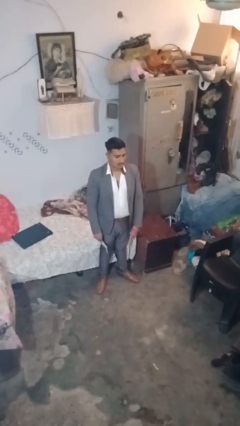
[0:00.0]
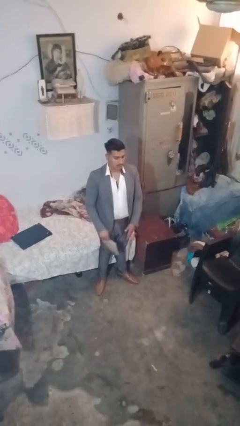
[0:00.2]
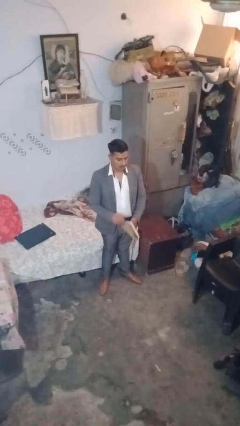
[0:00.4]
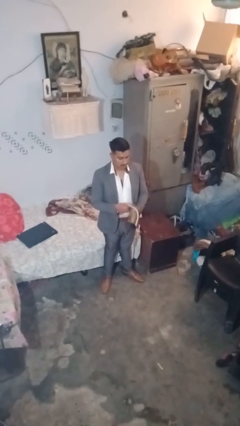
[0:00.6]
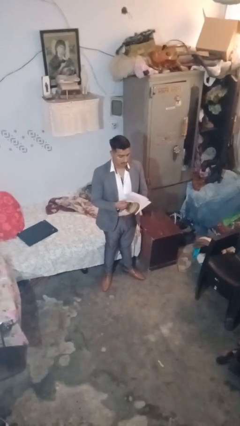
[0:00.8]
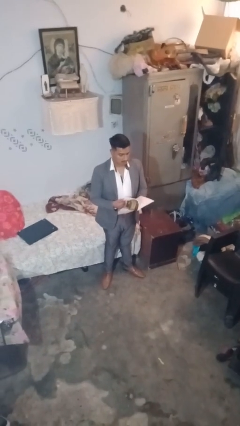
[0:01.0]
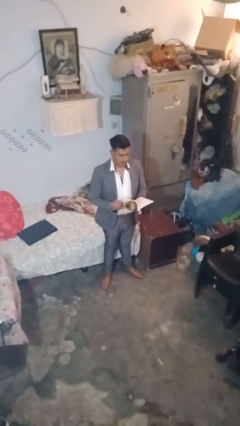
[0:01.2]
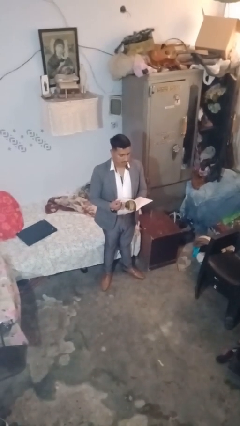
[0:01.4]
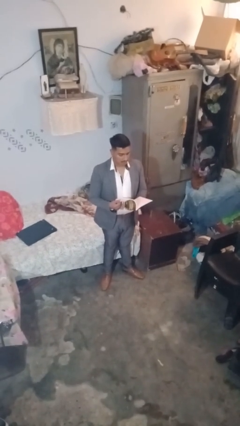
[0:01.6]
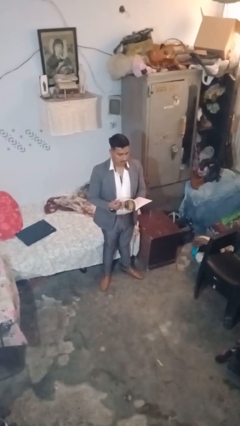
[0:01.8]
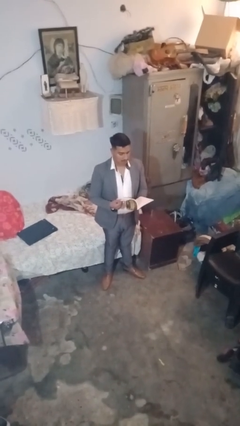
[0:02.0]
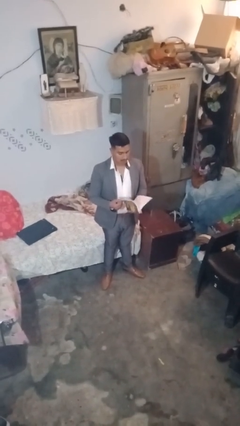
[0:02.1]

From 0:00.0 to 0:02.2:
person reads document

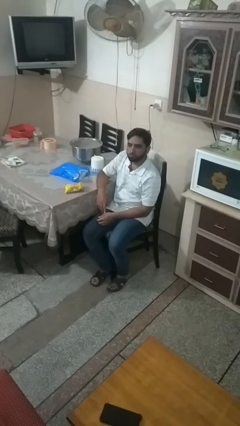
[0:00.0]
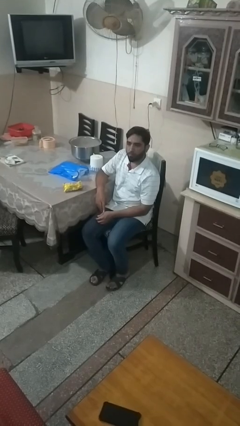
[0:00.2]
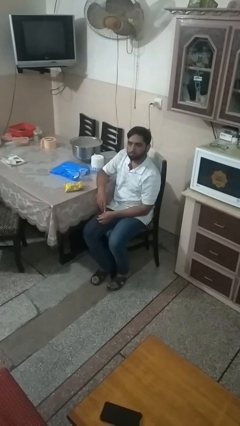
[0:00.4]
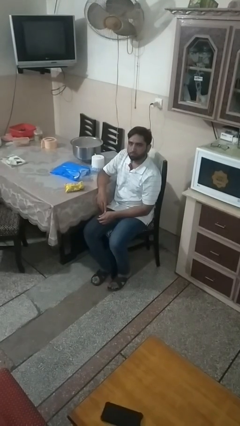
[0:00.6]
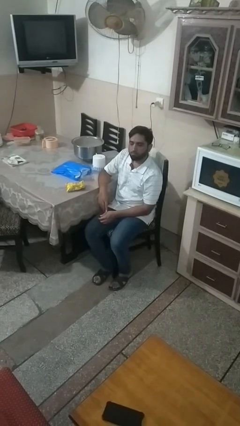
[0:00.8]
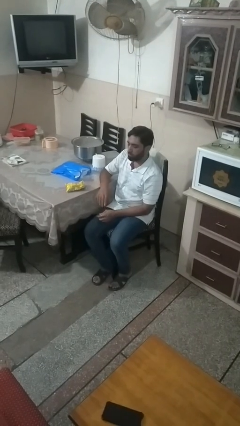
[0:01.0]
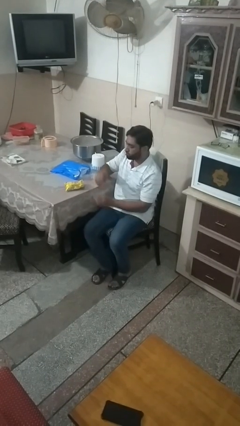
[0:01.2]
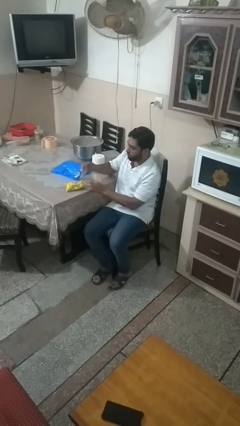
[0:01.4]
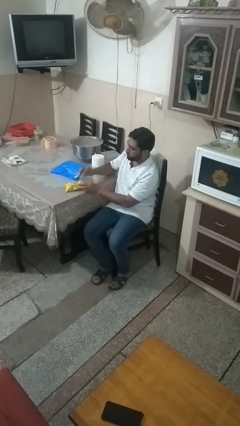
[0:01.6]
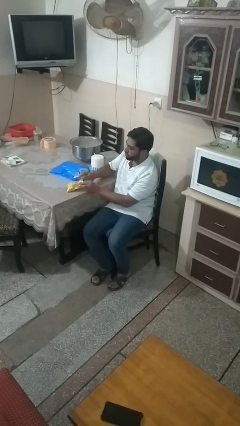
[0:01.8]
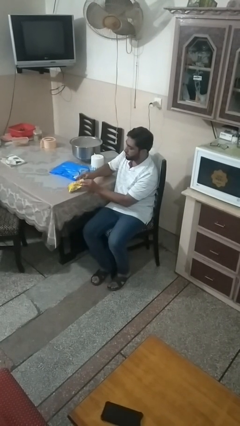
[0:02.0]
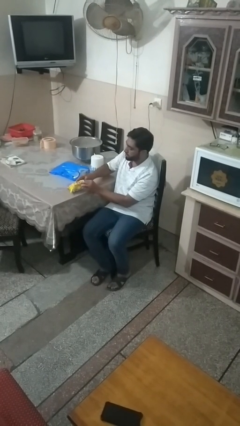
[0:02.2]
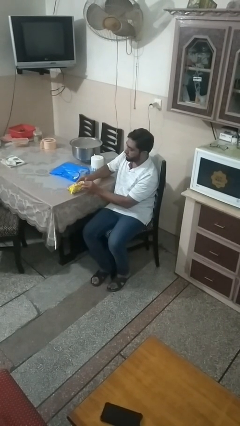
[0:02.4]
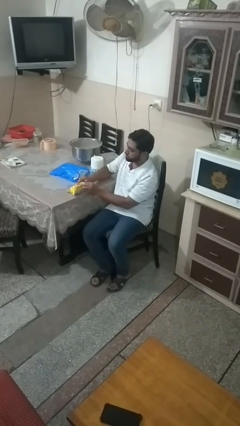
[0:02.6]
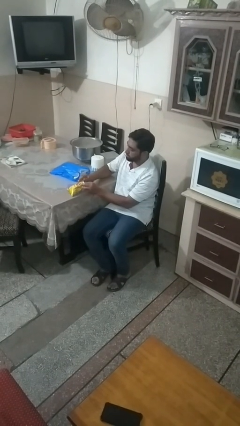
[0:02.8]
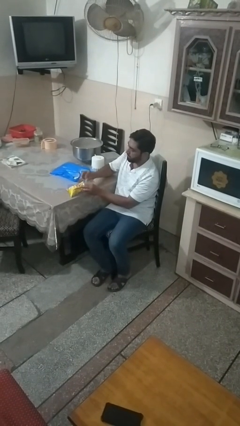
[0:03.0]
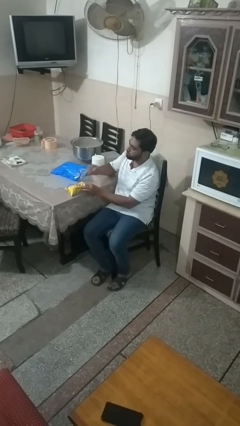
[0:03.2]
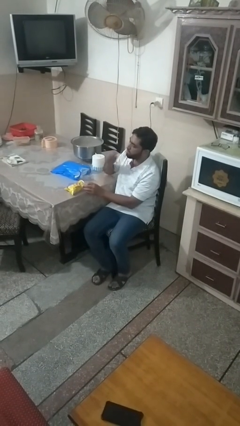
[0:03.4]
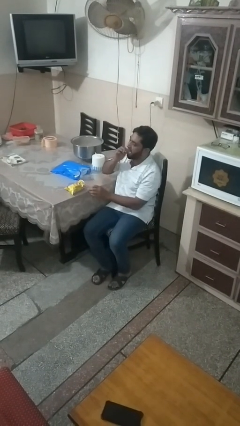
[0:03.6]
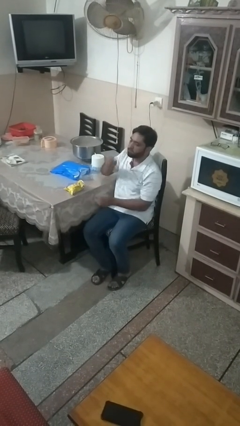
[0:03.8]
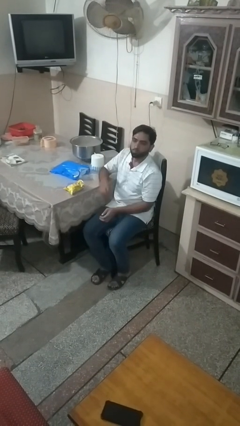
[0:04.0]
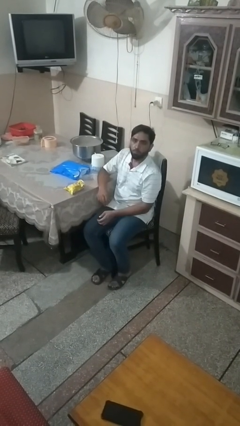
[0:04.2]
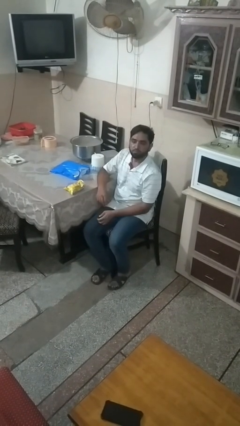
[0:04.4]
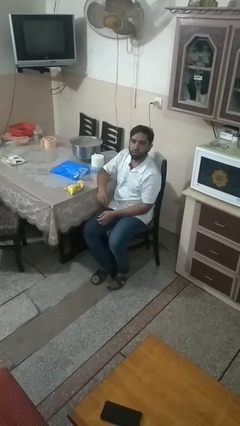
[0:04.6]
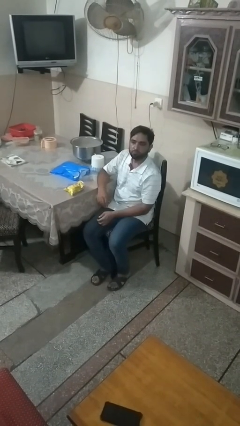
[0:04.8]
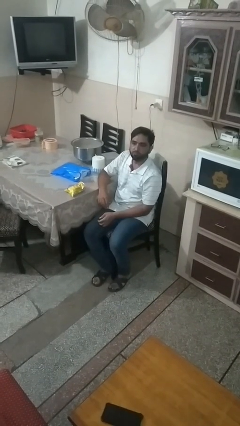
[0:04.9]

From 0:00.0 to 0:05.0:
person eats snack from bag

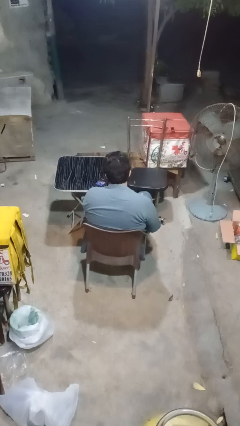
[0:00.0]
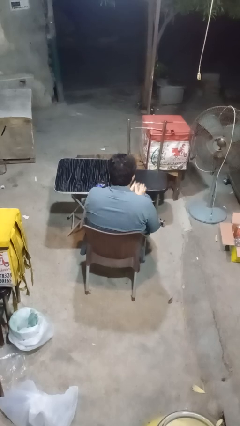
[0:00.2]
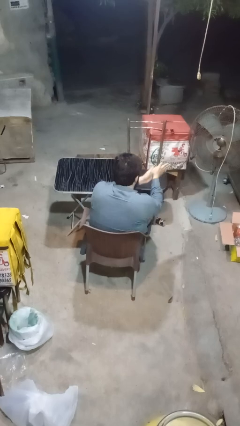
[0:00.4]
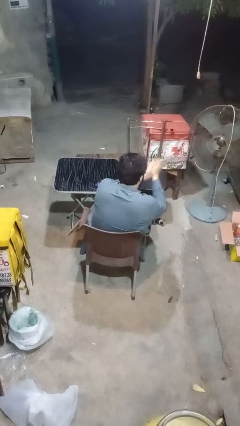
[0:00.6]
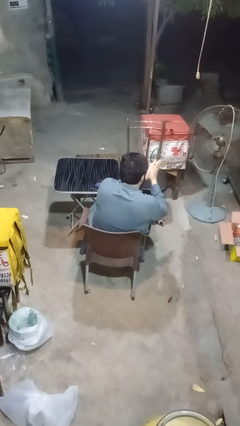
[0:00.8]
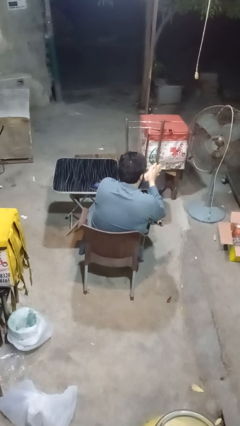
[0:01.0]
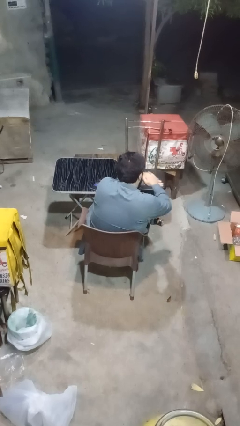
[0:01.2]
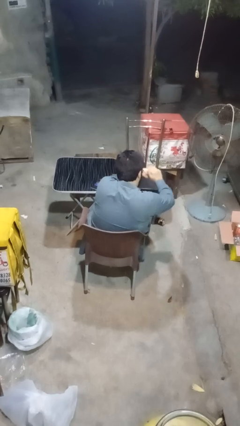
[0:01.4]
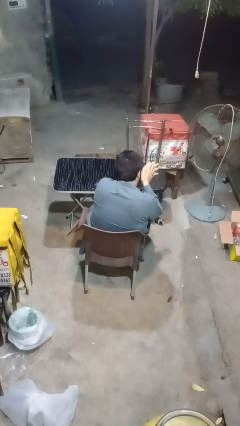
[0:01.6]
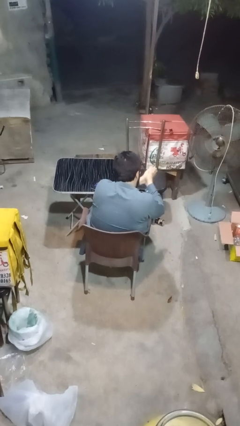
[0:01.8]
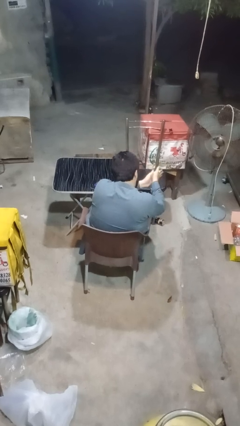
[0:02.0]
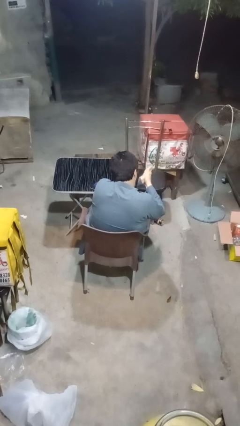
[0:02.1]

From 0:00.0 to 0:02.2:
person blows into hands

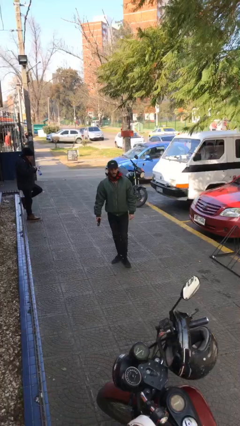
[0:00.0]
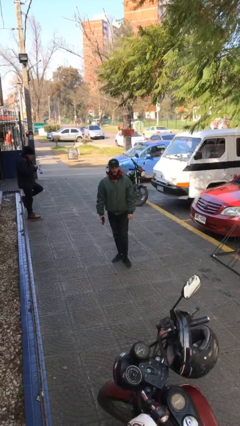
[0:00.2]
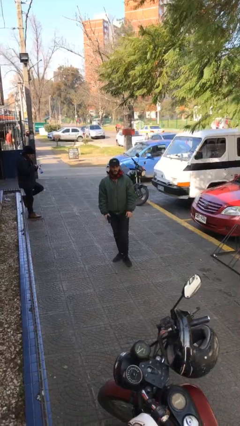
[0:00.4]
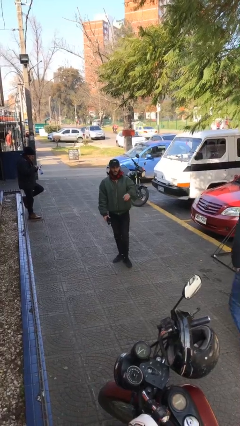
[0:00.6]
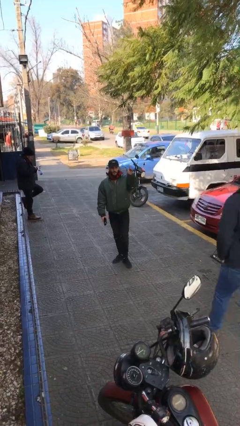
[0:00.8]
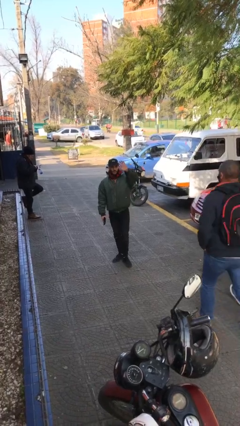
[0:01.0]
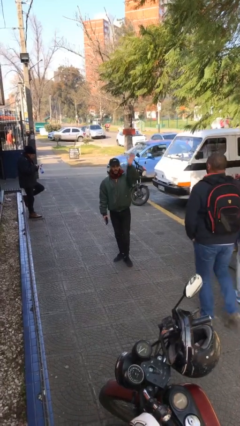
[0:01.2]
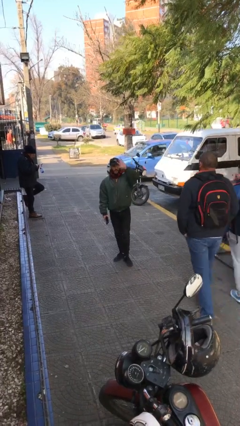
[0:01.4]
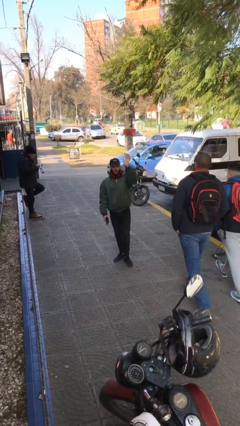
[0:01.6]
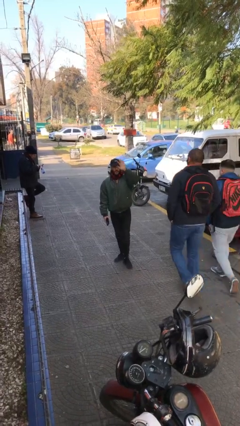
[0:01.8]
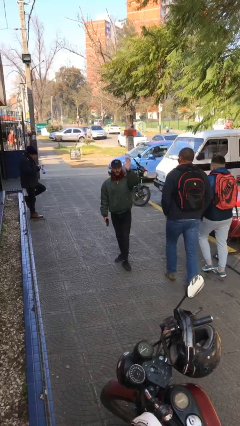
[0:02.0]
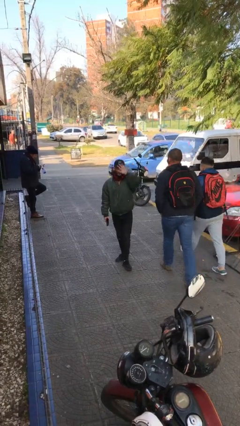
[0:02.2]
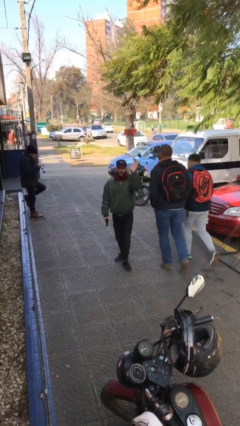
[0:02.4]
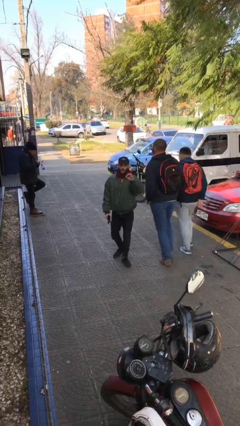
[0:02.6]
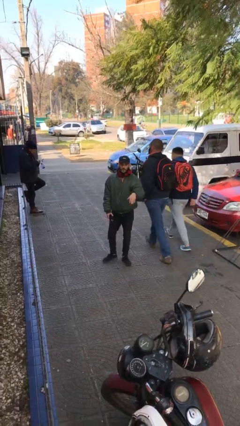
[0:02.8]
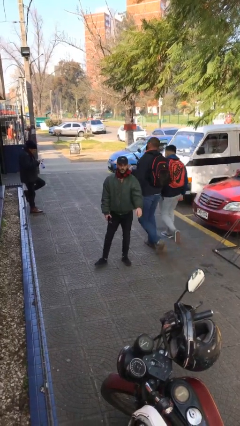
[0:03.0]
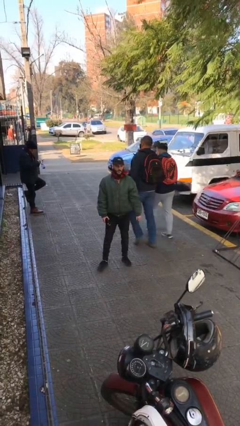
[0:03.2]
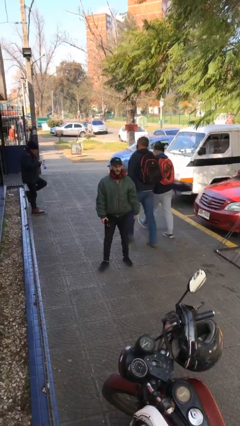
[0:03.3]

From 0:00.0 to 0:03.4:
person waves at person

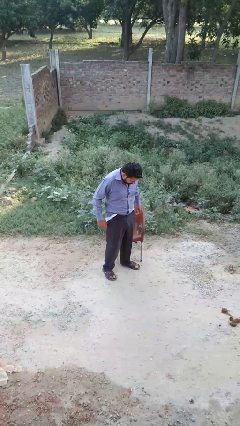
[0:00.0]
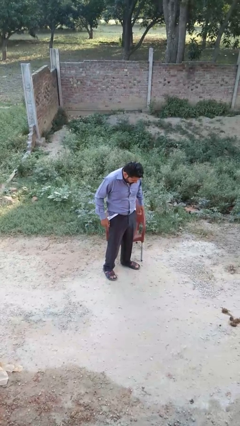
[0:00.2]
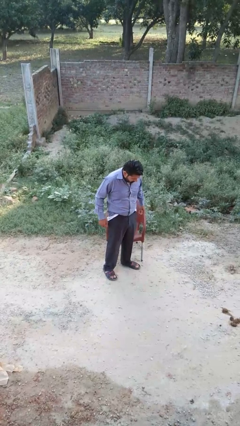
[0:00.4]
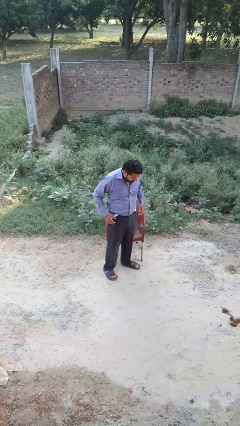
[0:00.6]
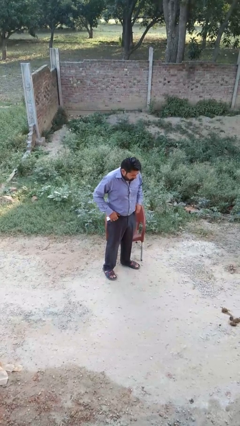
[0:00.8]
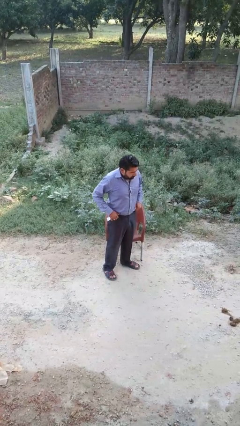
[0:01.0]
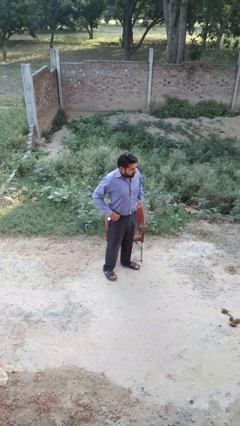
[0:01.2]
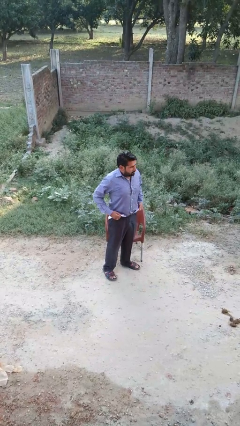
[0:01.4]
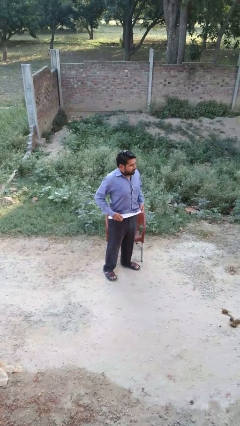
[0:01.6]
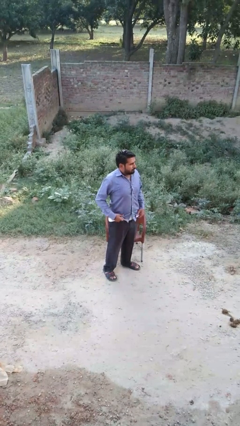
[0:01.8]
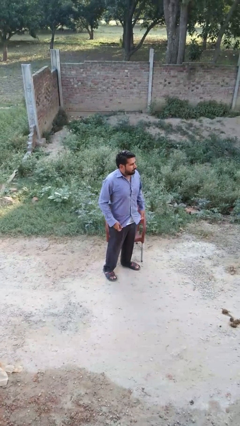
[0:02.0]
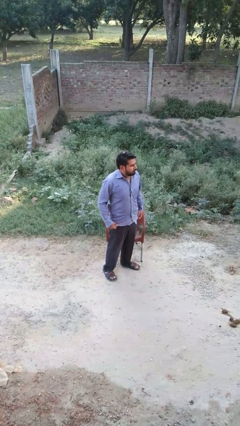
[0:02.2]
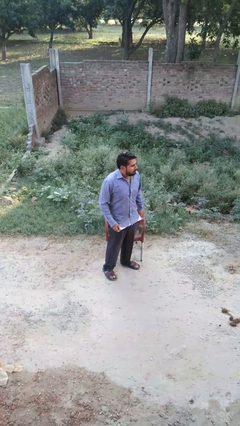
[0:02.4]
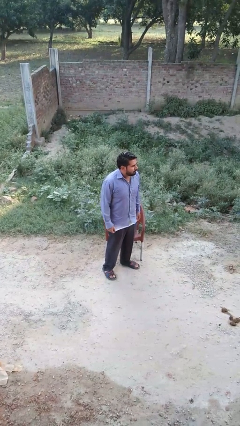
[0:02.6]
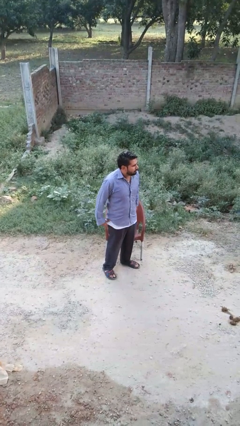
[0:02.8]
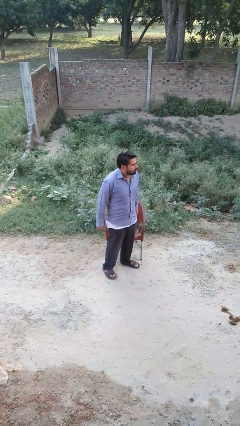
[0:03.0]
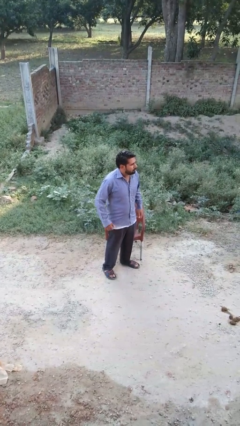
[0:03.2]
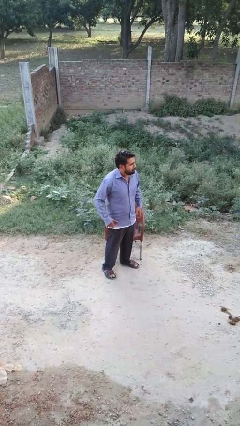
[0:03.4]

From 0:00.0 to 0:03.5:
person untucks shirt

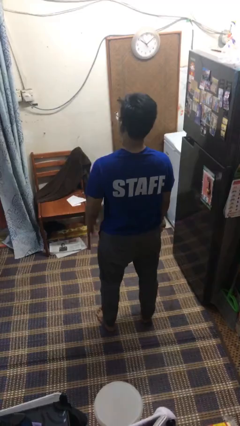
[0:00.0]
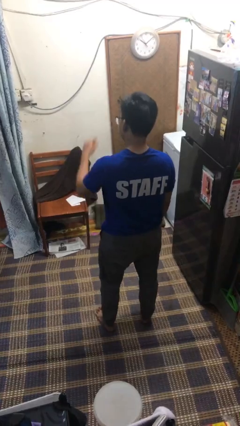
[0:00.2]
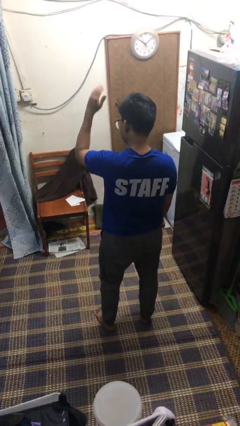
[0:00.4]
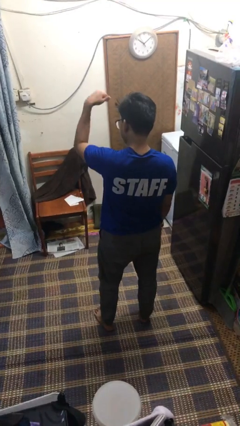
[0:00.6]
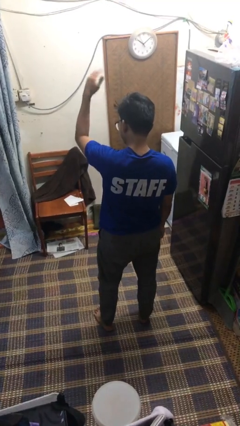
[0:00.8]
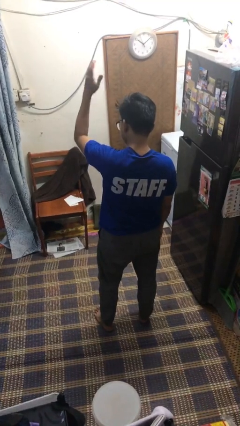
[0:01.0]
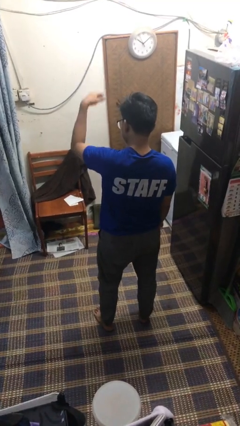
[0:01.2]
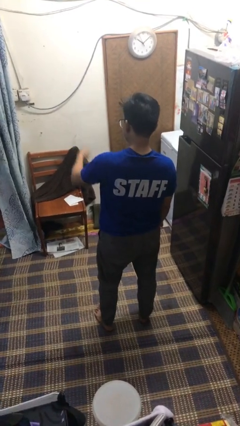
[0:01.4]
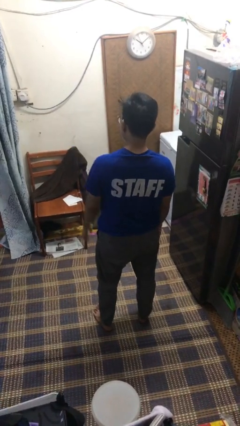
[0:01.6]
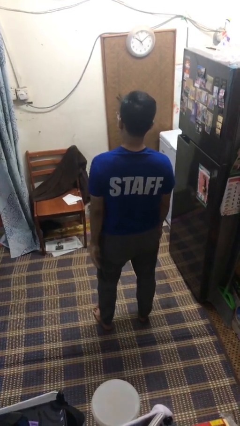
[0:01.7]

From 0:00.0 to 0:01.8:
person gestures come here
